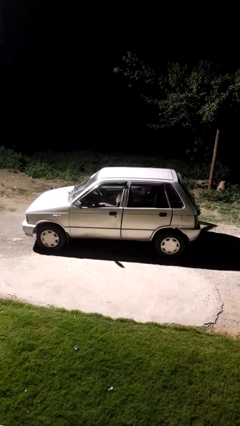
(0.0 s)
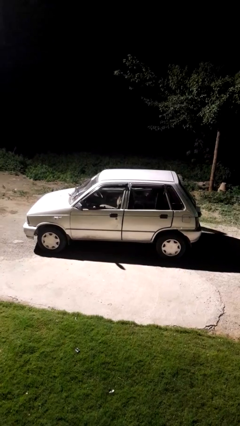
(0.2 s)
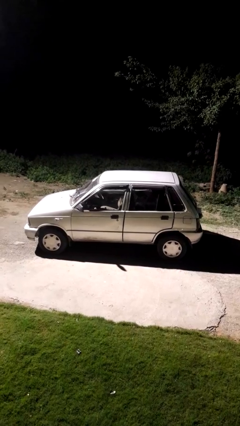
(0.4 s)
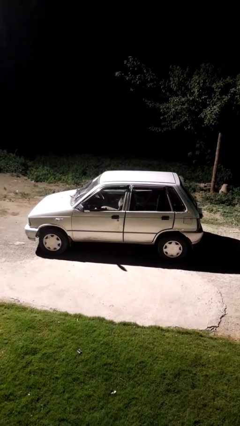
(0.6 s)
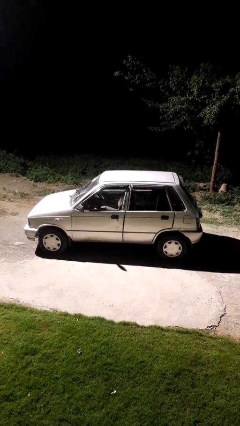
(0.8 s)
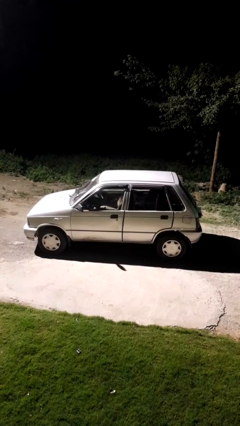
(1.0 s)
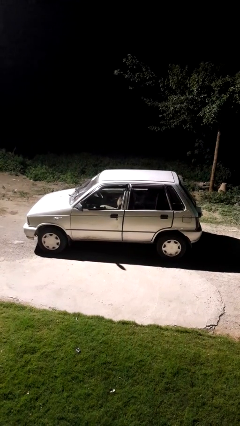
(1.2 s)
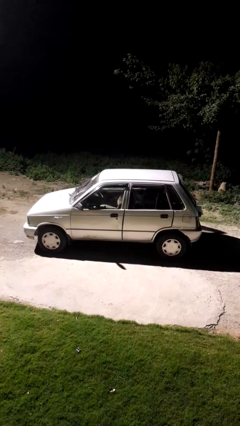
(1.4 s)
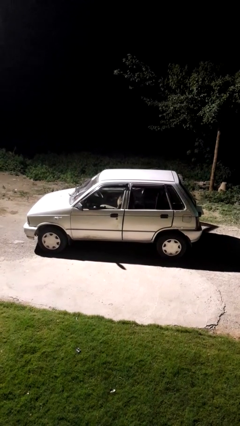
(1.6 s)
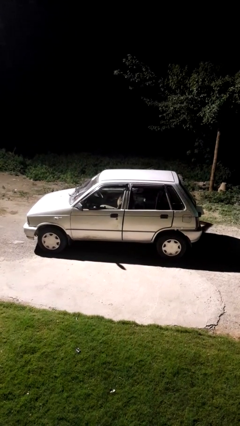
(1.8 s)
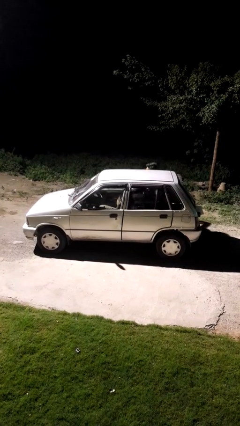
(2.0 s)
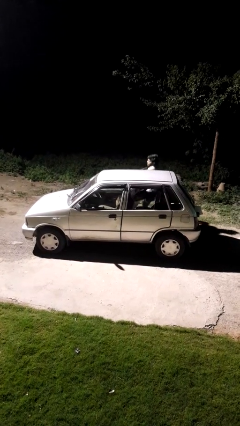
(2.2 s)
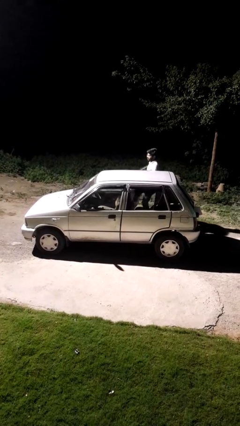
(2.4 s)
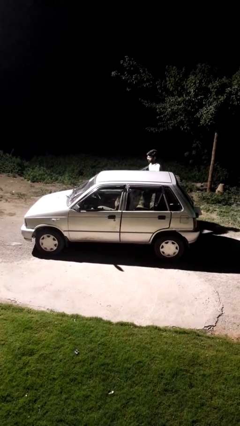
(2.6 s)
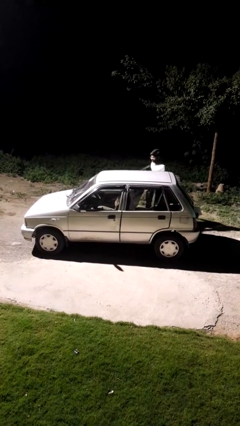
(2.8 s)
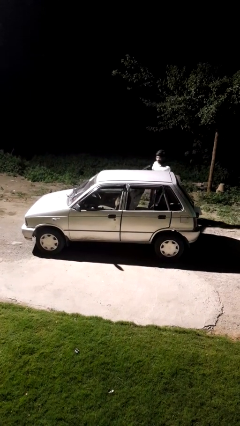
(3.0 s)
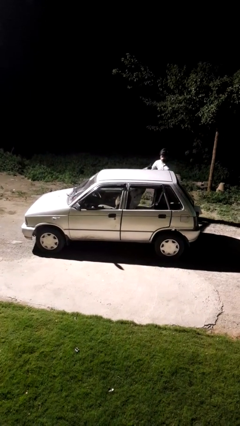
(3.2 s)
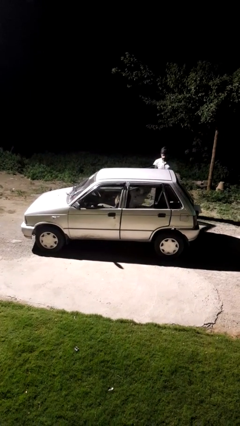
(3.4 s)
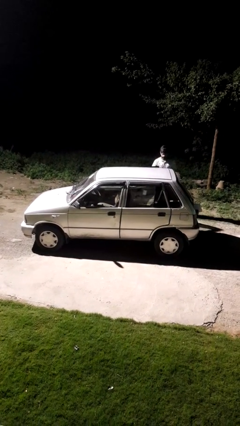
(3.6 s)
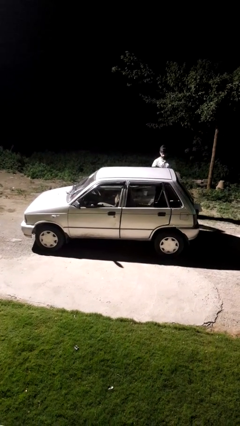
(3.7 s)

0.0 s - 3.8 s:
car drops off person

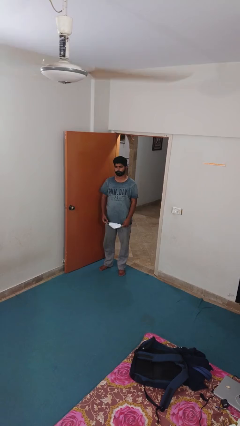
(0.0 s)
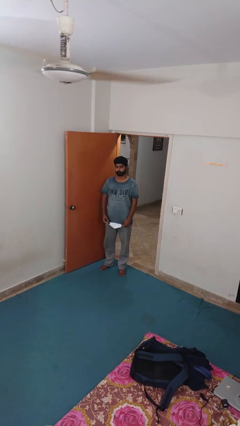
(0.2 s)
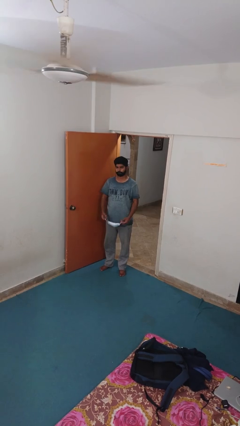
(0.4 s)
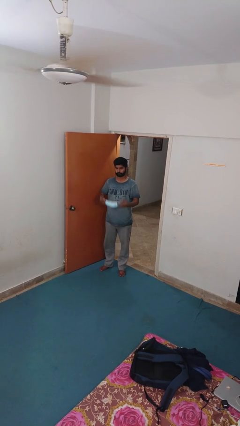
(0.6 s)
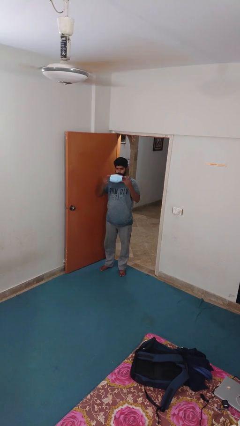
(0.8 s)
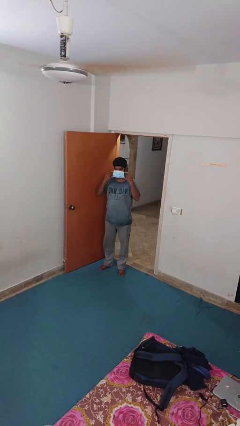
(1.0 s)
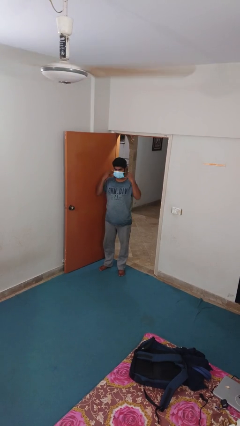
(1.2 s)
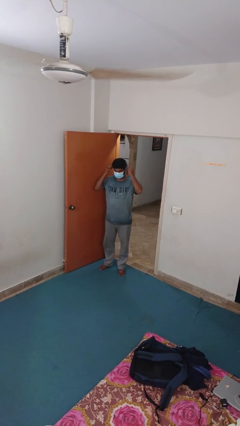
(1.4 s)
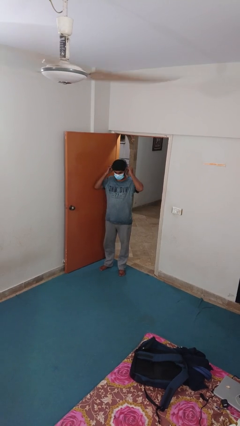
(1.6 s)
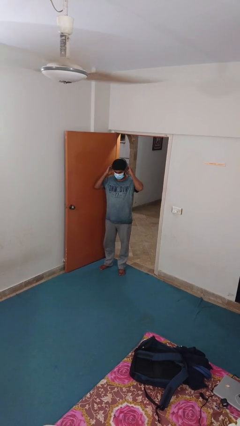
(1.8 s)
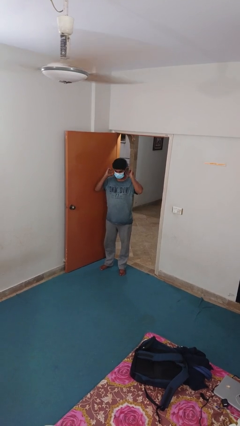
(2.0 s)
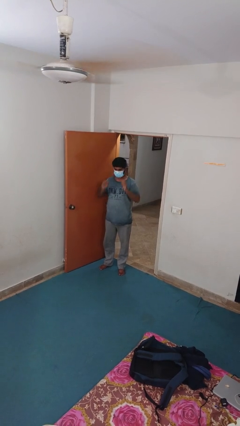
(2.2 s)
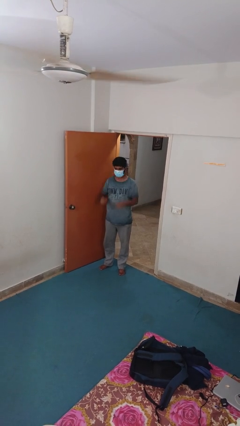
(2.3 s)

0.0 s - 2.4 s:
person puts on facemask

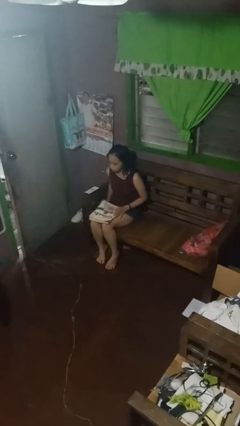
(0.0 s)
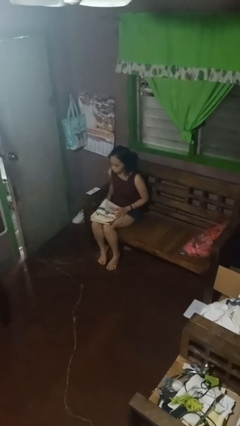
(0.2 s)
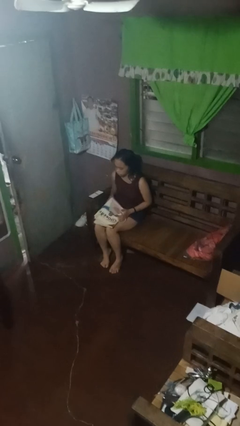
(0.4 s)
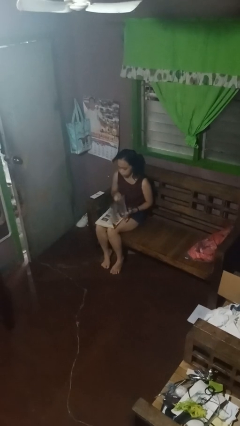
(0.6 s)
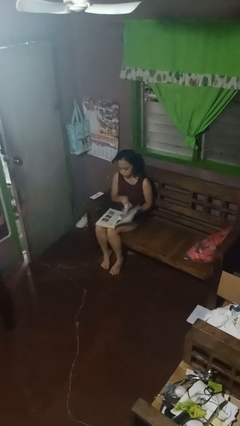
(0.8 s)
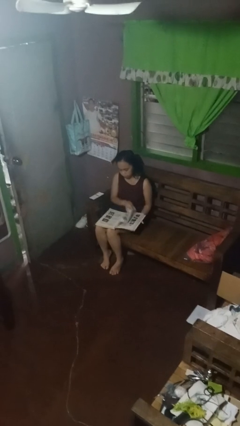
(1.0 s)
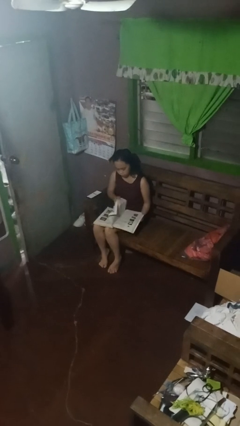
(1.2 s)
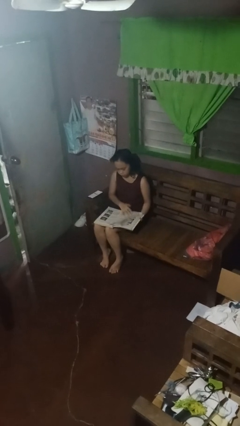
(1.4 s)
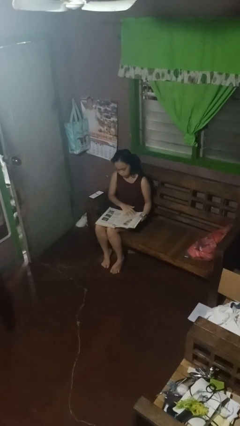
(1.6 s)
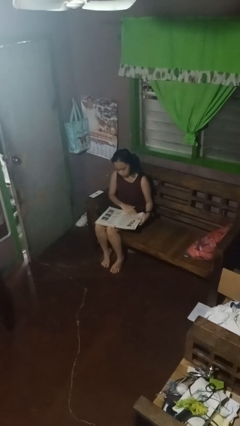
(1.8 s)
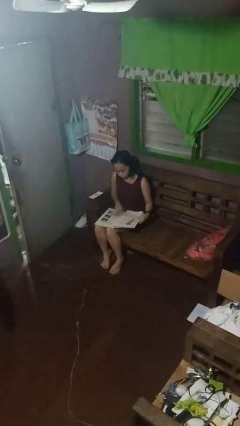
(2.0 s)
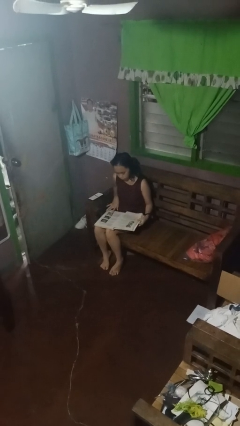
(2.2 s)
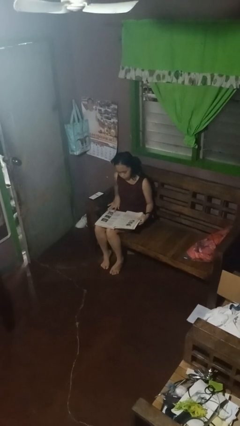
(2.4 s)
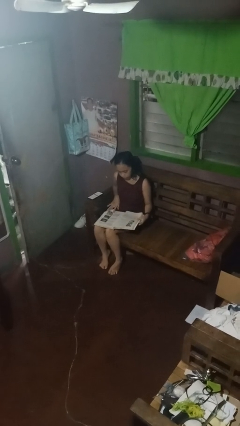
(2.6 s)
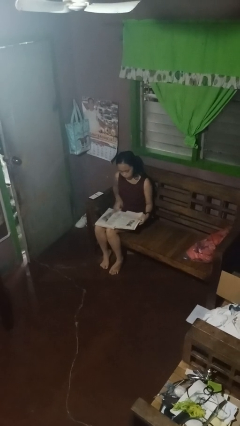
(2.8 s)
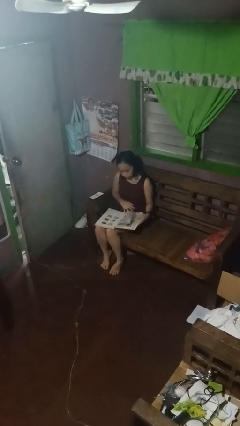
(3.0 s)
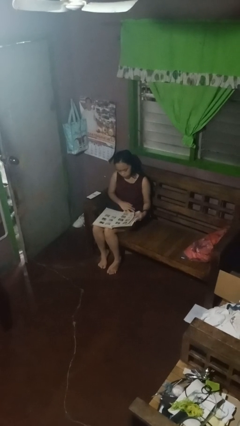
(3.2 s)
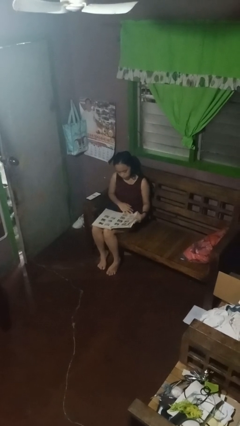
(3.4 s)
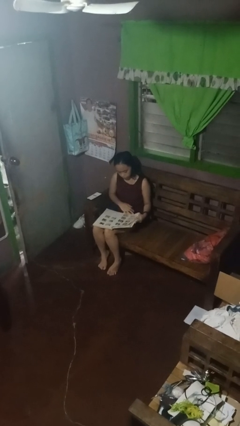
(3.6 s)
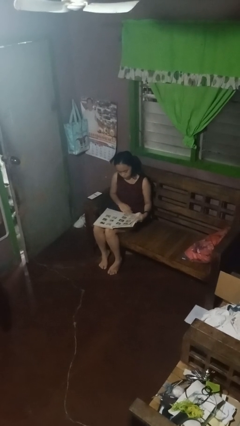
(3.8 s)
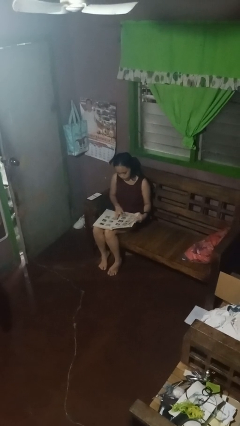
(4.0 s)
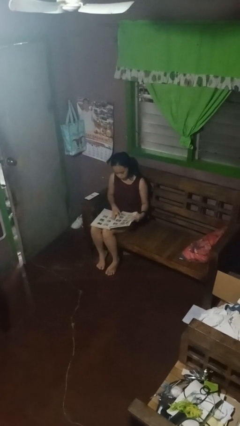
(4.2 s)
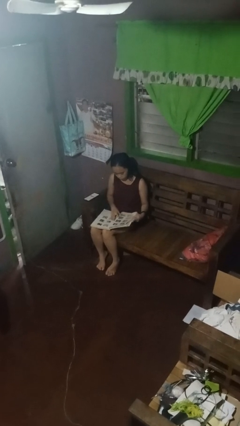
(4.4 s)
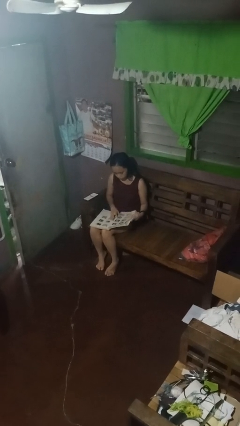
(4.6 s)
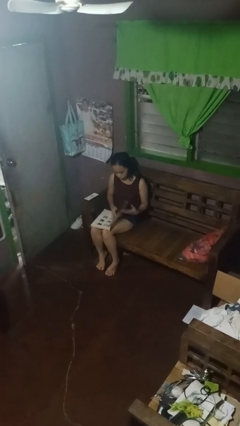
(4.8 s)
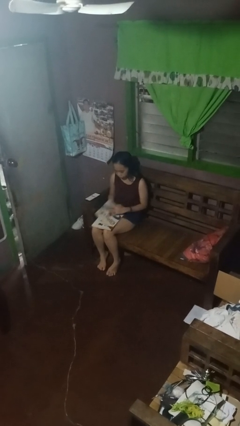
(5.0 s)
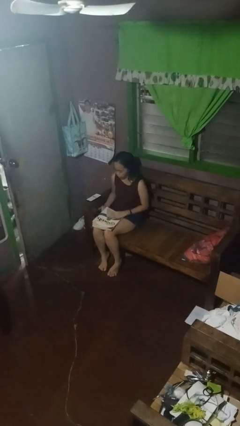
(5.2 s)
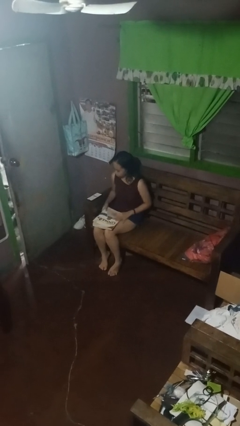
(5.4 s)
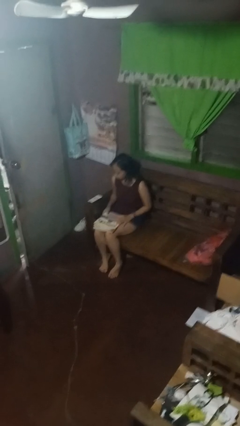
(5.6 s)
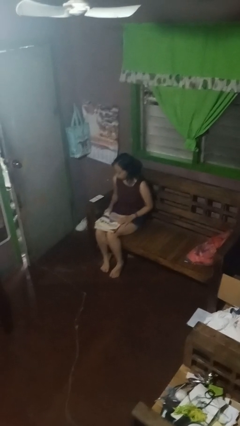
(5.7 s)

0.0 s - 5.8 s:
person reads book

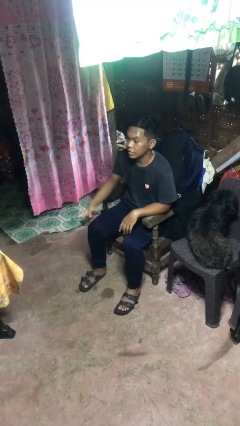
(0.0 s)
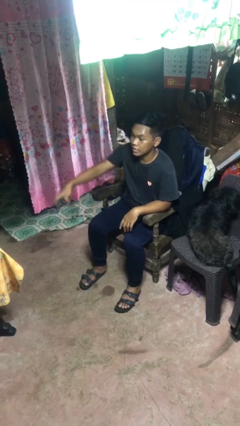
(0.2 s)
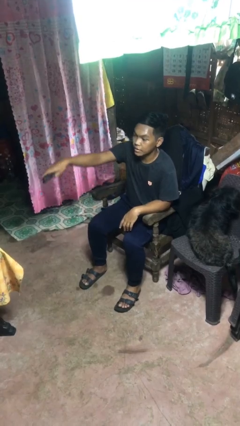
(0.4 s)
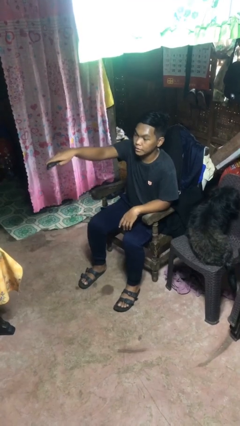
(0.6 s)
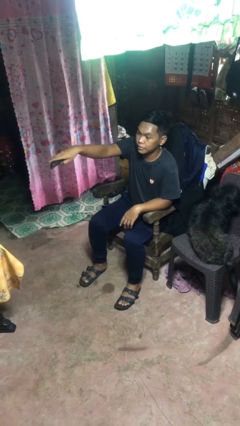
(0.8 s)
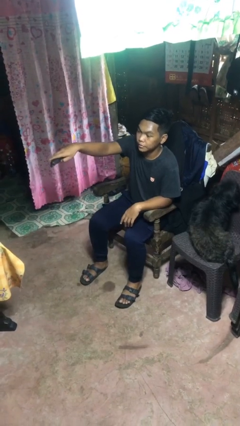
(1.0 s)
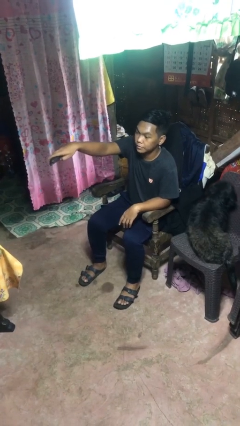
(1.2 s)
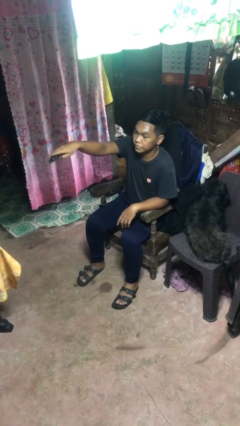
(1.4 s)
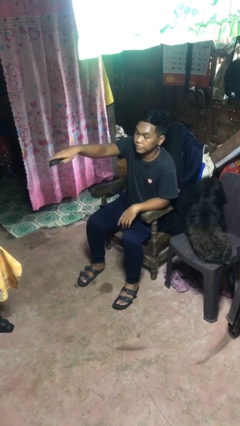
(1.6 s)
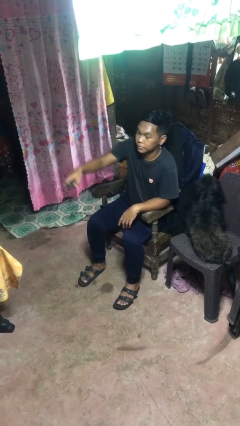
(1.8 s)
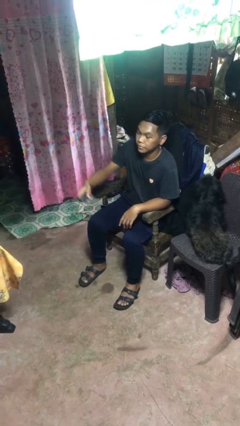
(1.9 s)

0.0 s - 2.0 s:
person uses television remote

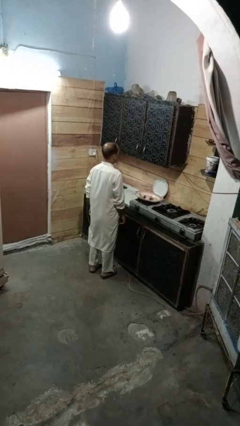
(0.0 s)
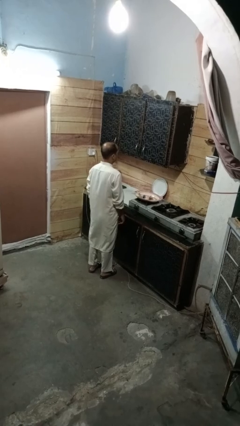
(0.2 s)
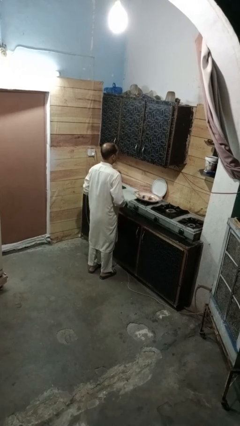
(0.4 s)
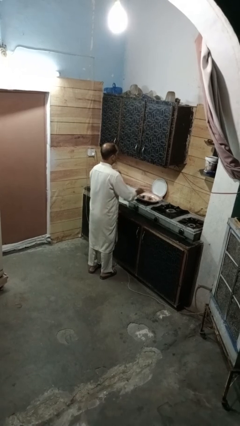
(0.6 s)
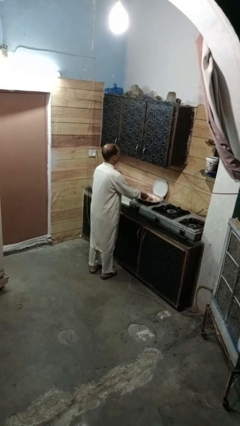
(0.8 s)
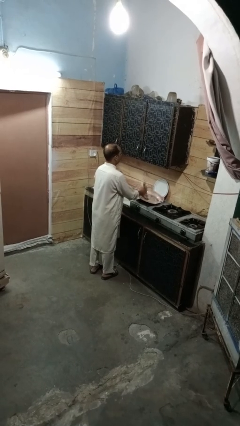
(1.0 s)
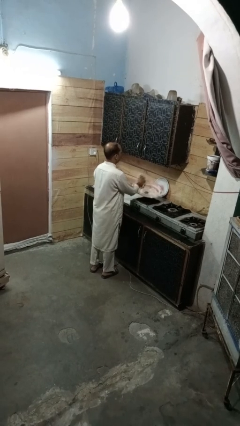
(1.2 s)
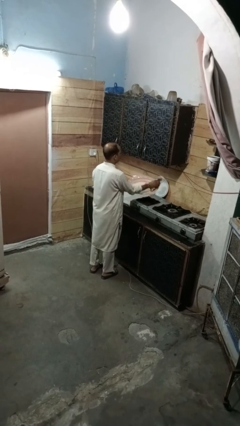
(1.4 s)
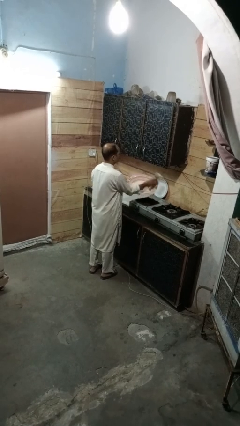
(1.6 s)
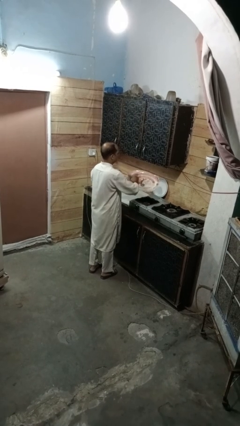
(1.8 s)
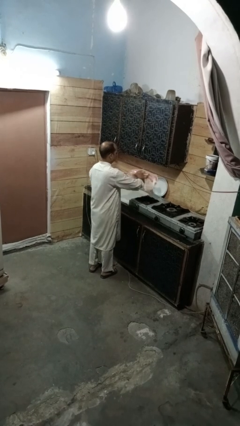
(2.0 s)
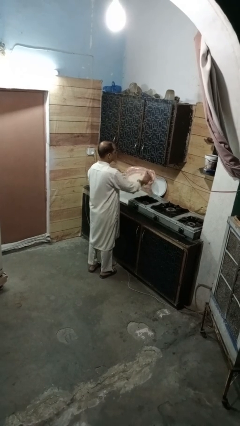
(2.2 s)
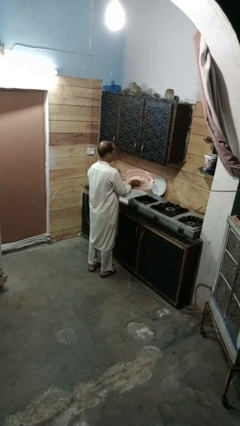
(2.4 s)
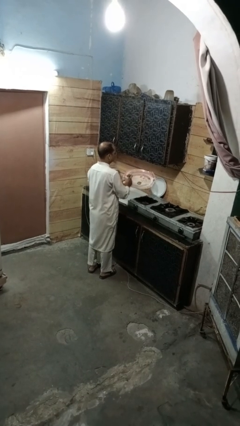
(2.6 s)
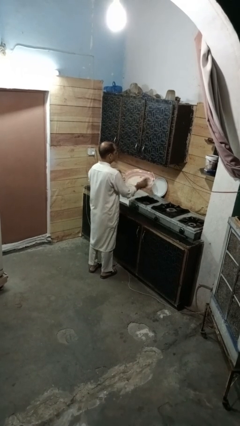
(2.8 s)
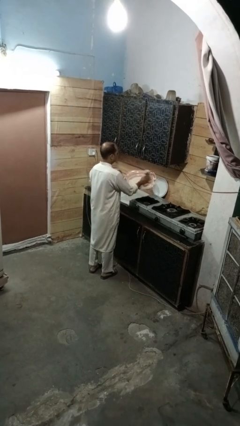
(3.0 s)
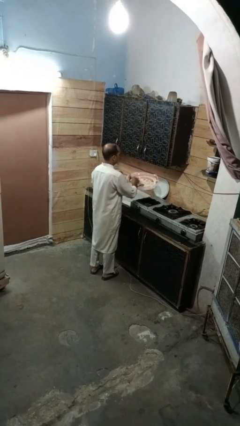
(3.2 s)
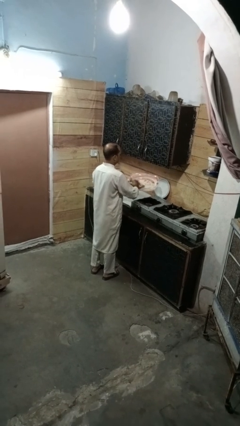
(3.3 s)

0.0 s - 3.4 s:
person dries dish

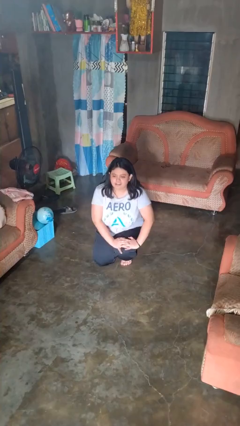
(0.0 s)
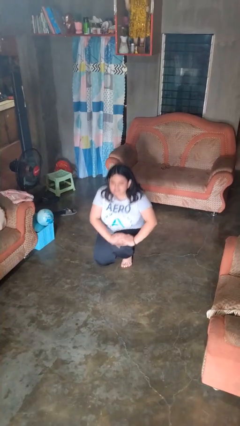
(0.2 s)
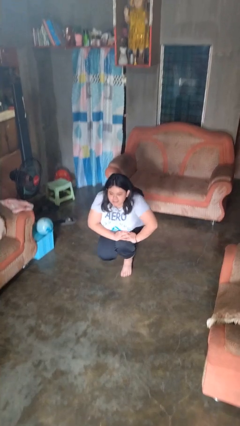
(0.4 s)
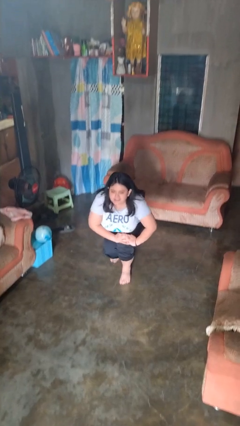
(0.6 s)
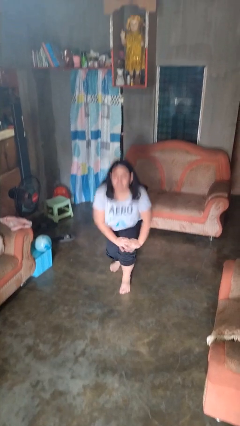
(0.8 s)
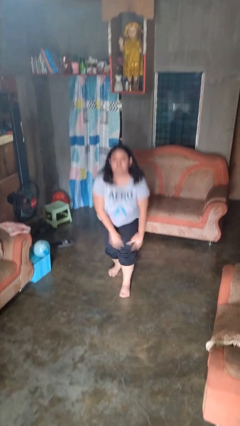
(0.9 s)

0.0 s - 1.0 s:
person stands up from floor
